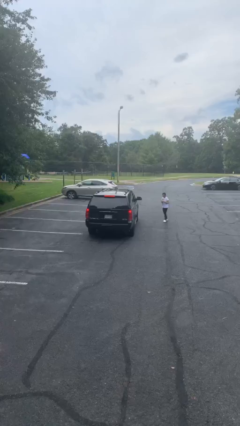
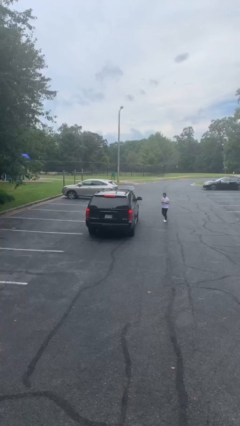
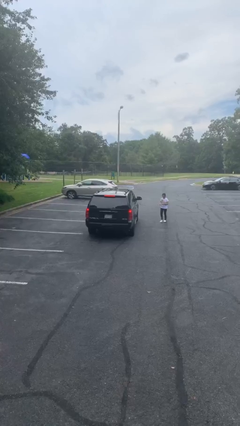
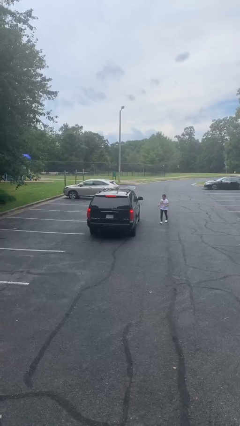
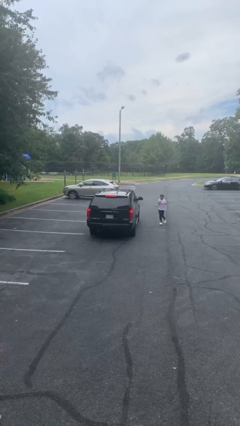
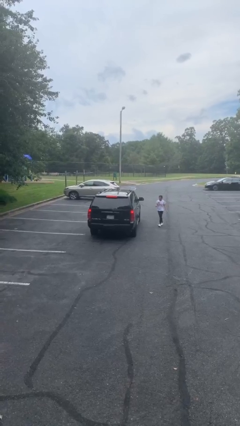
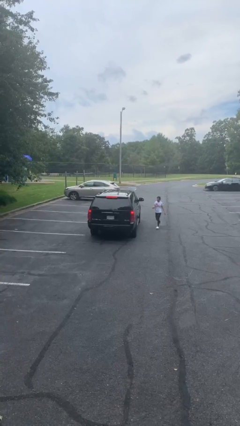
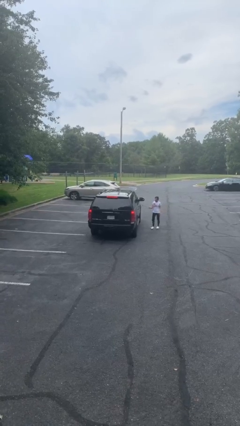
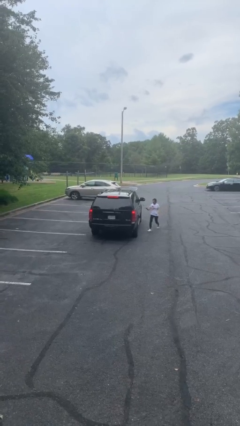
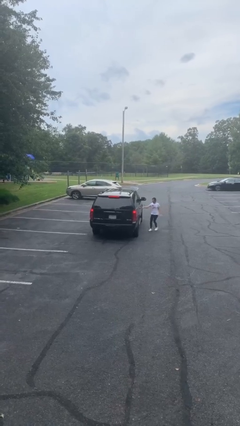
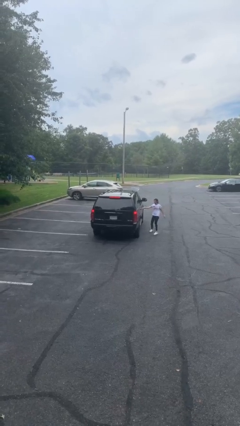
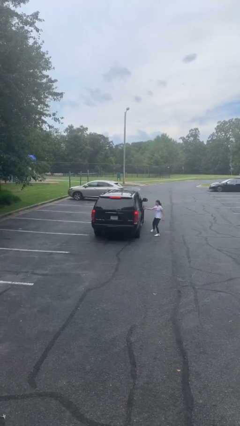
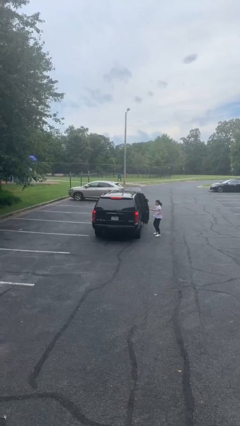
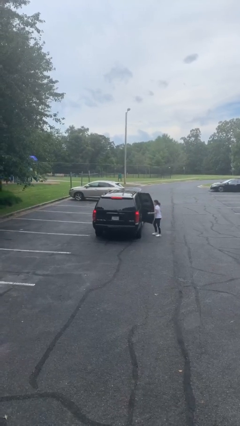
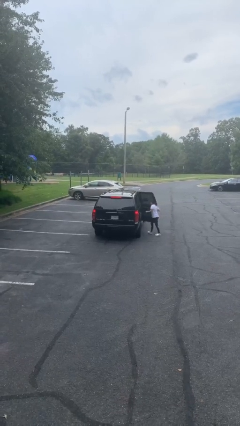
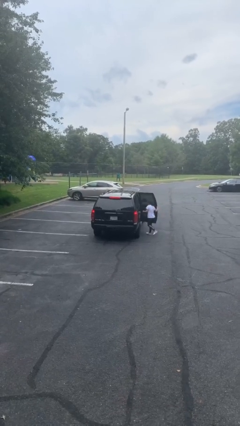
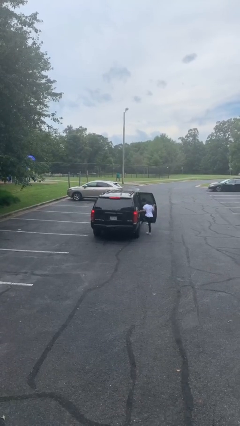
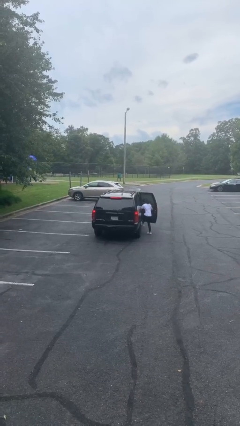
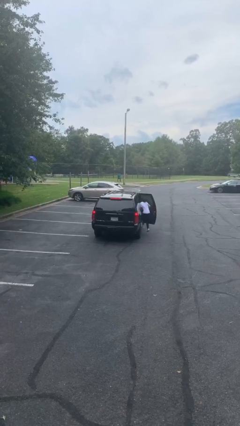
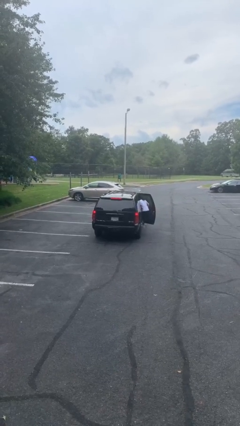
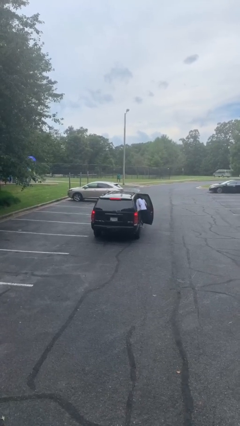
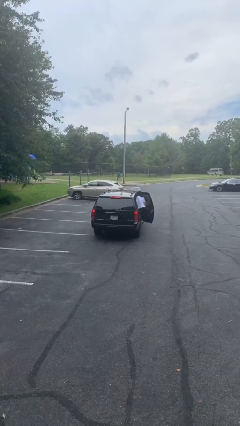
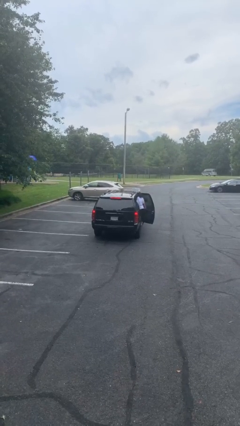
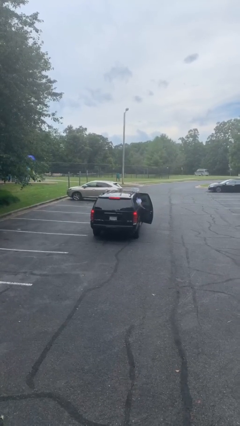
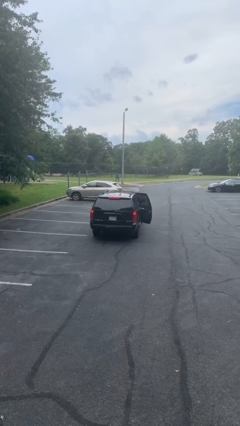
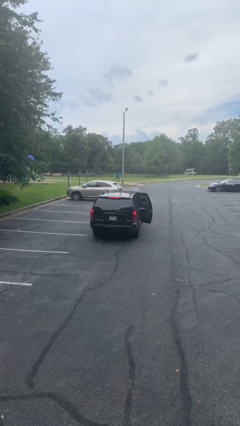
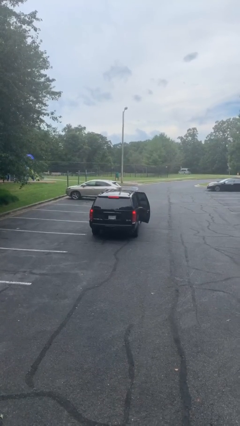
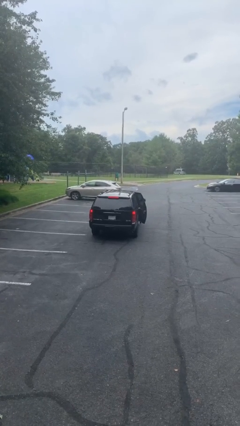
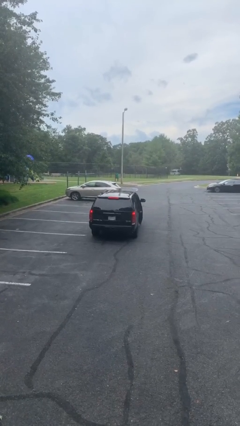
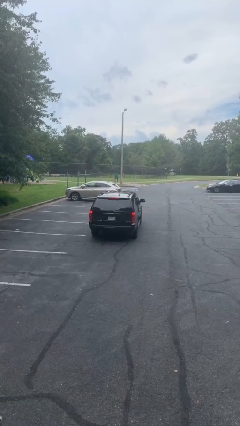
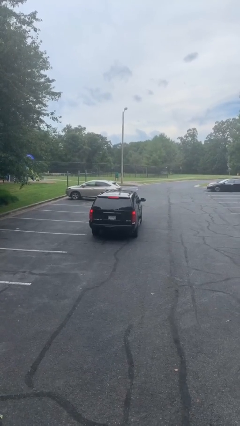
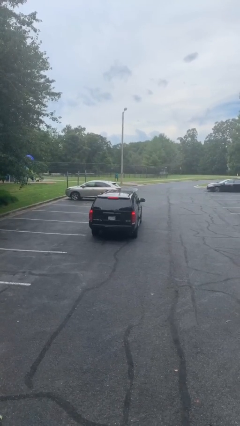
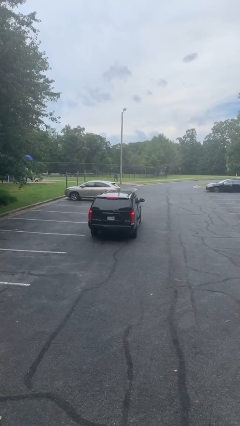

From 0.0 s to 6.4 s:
car picks up person

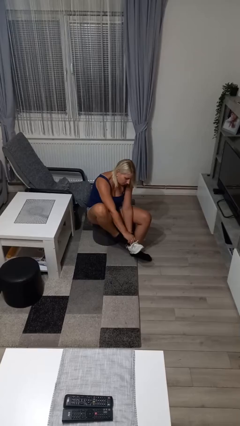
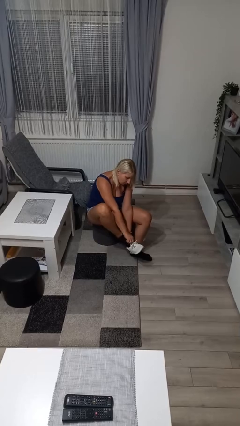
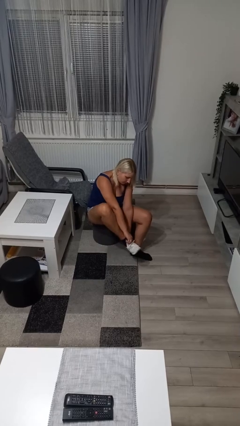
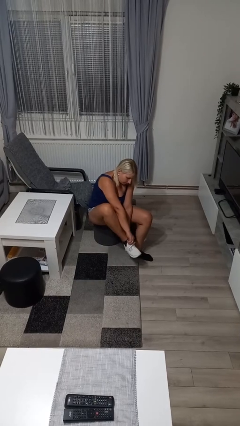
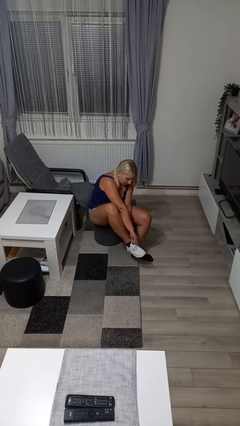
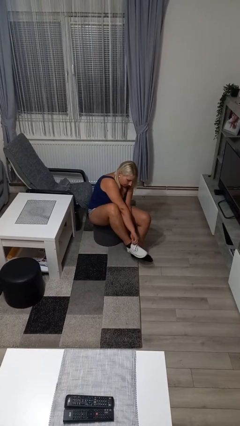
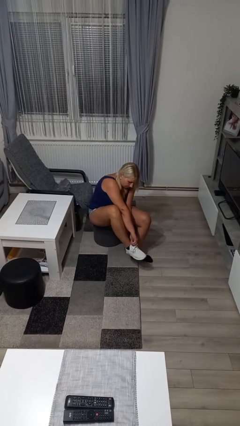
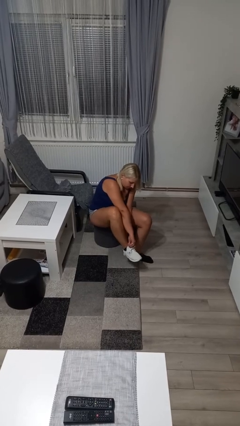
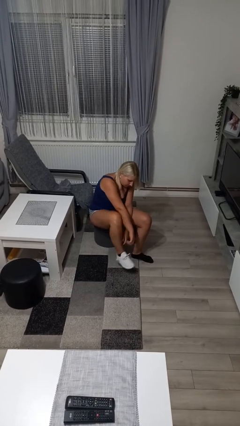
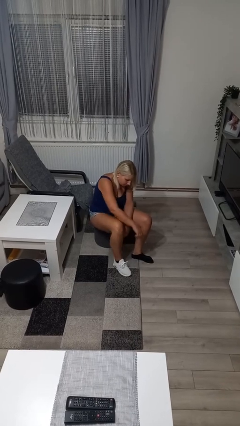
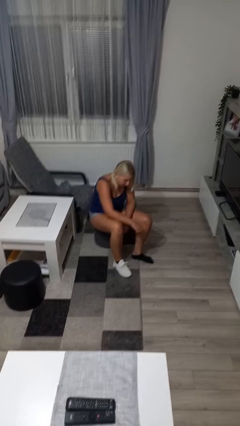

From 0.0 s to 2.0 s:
person puts on shoes

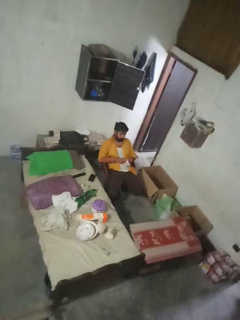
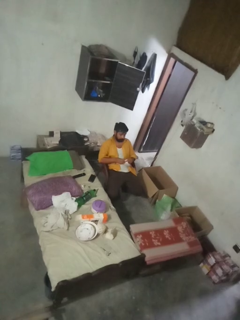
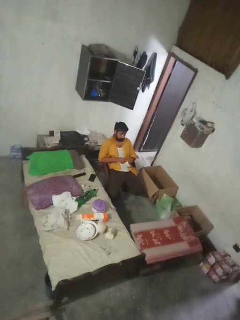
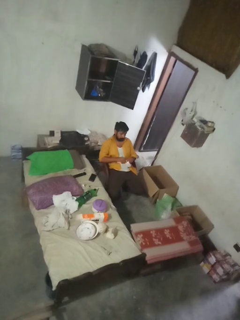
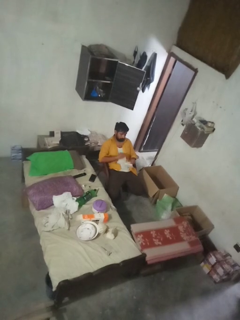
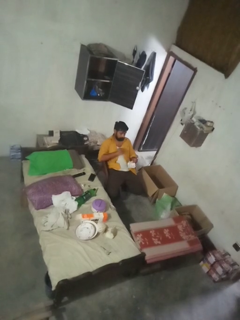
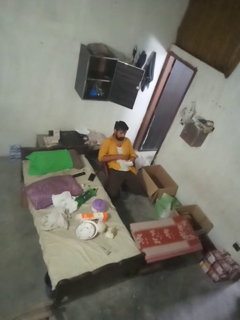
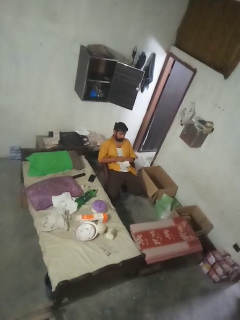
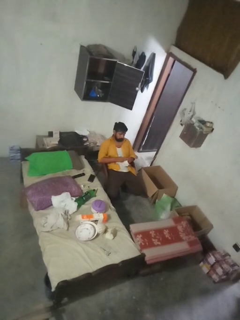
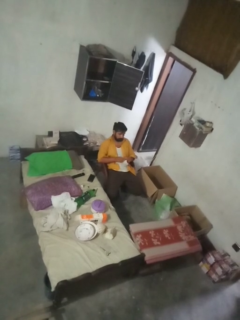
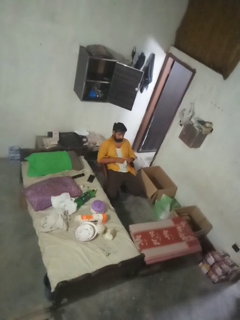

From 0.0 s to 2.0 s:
person tears paper

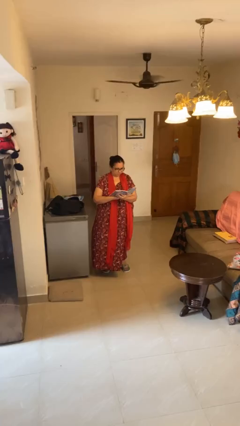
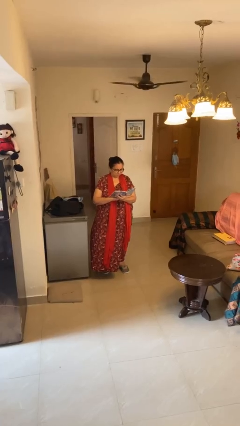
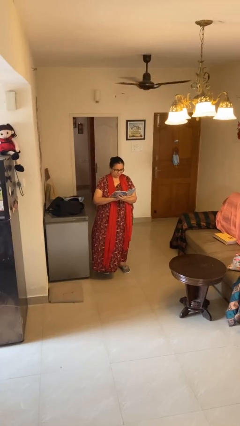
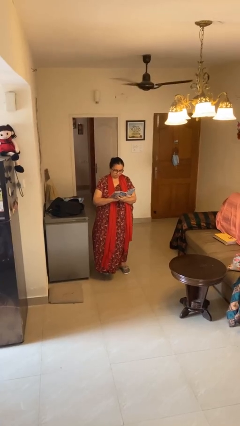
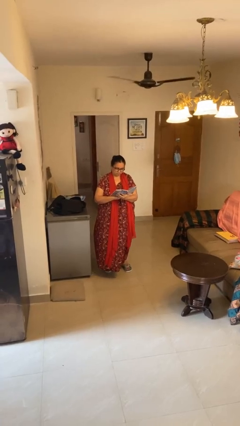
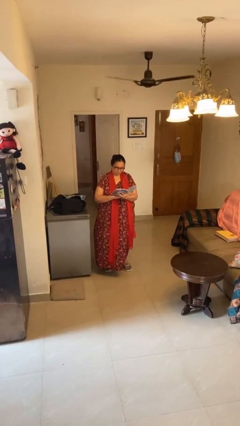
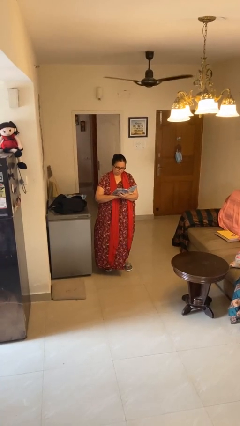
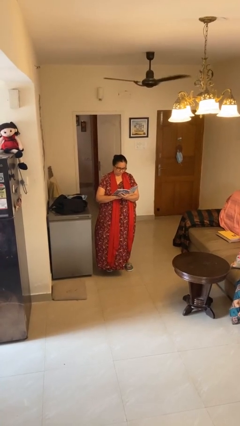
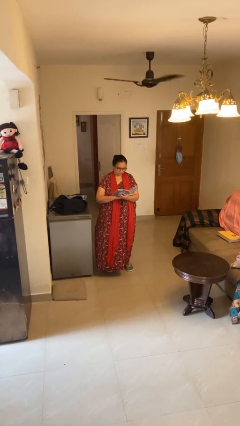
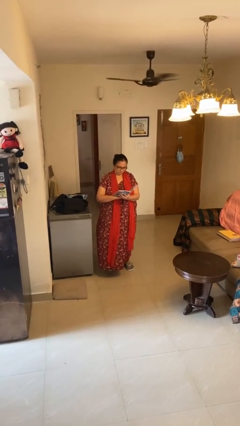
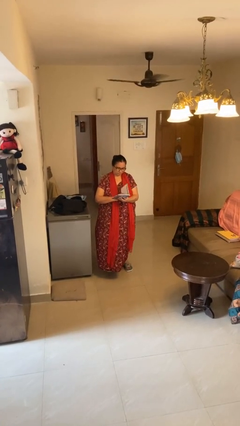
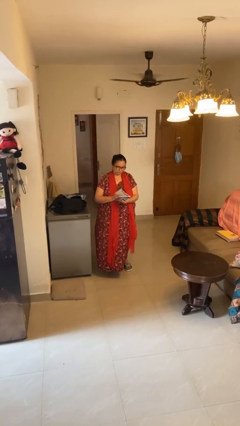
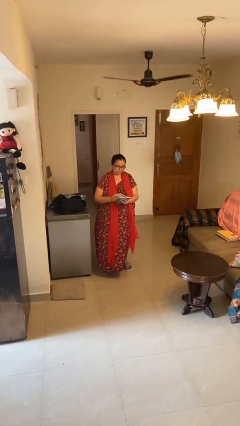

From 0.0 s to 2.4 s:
person reads document

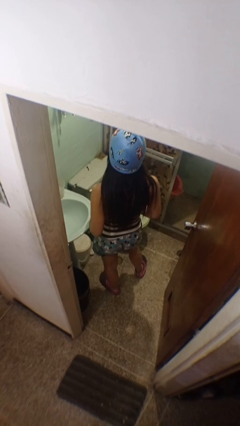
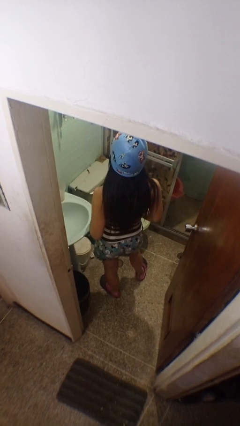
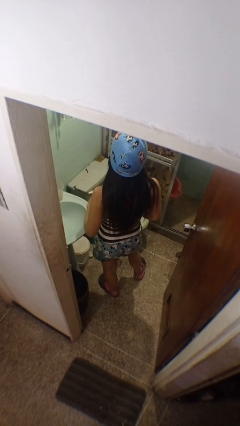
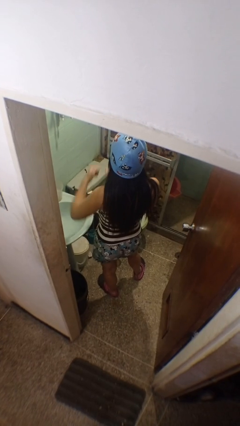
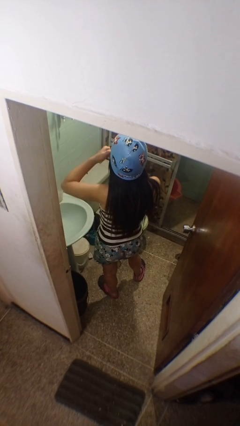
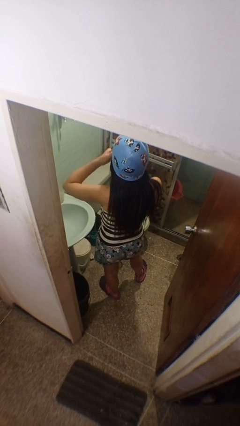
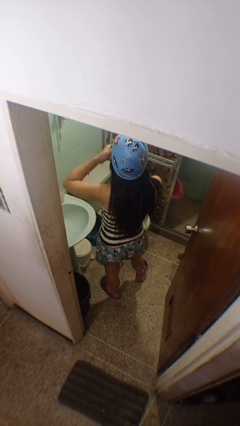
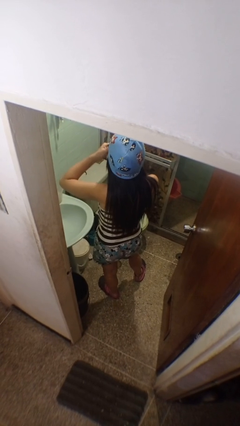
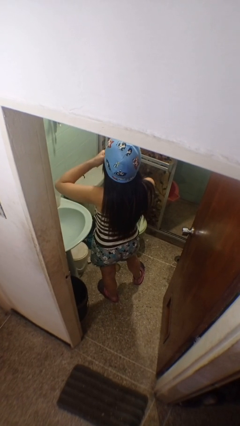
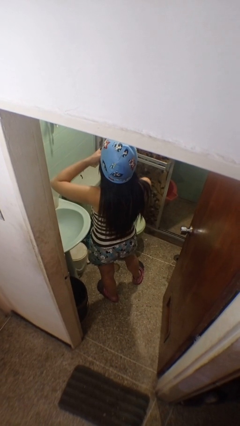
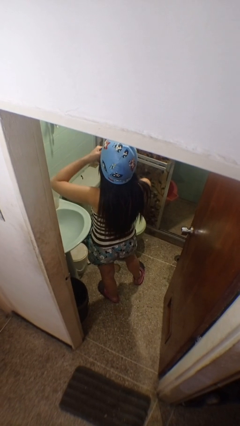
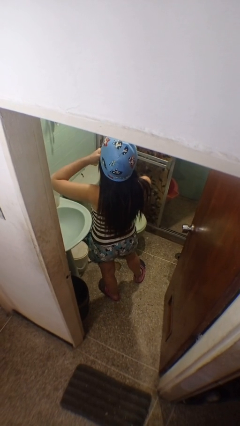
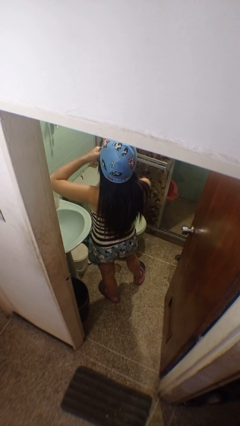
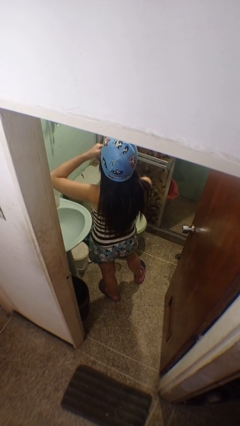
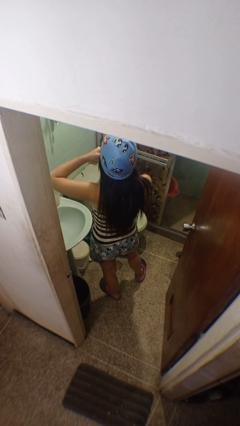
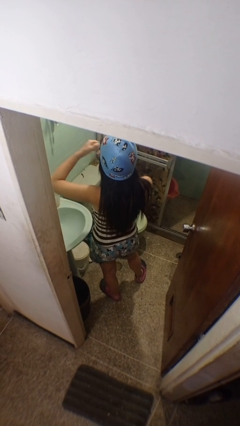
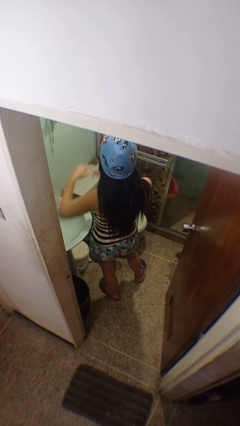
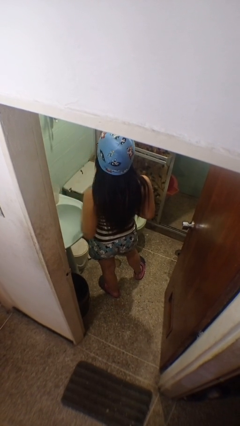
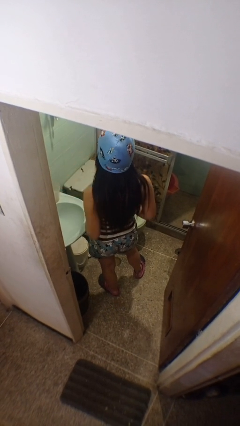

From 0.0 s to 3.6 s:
person flosses

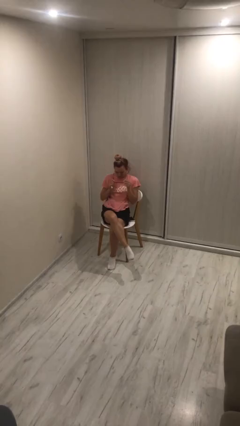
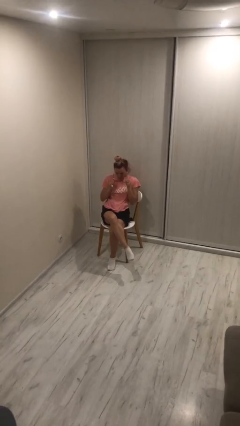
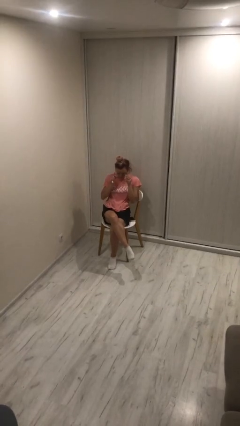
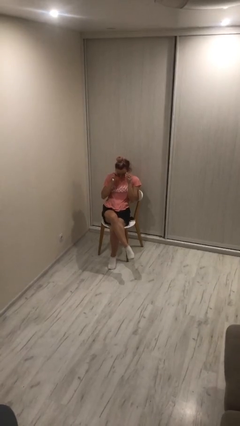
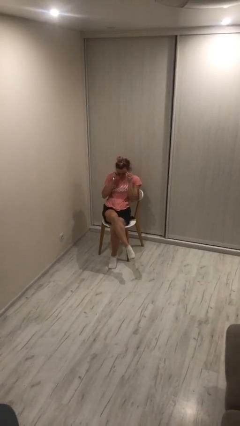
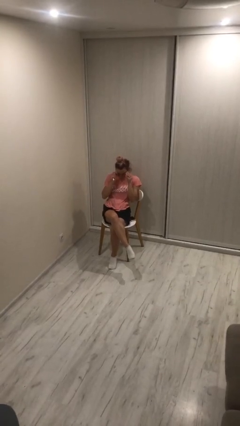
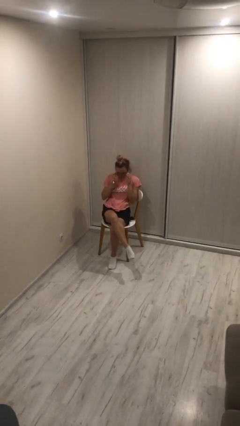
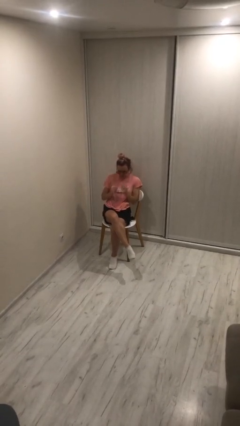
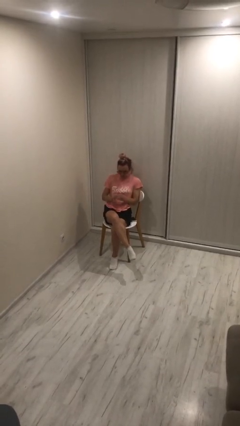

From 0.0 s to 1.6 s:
person puts on glasses
